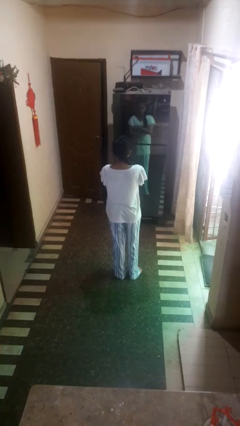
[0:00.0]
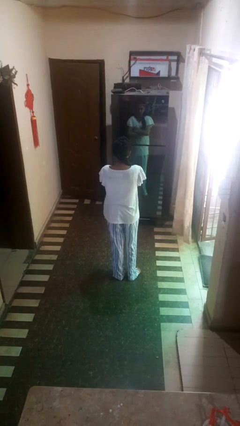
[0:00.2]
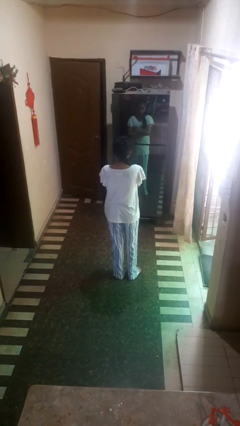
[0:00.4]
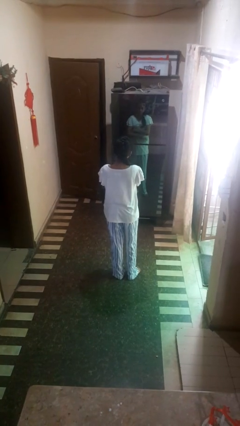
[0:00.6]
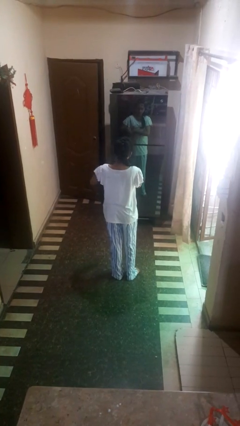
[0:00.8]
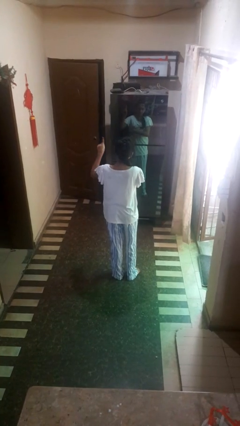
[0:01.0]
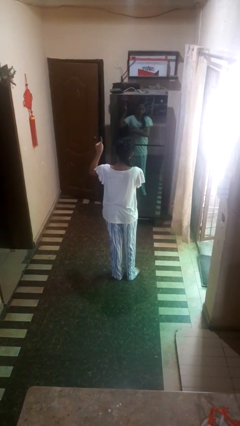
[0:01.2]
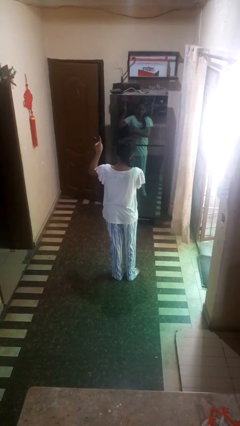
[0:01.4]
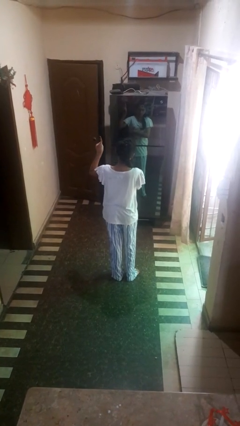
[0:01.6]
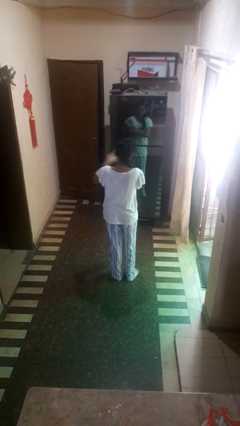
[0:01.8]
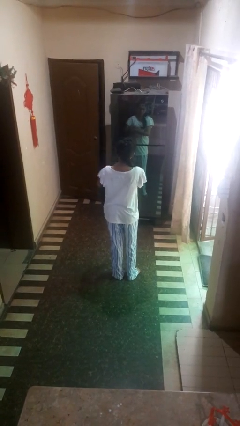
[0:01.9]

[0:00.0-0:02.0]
person gestures number one

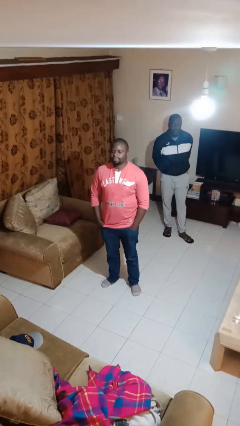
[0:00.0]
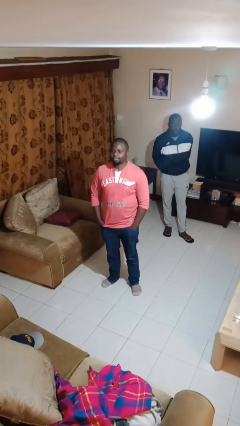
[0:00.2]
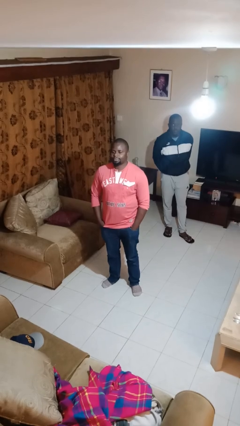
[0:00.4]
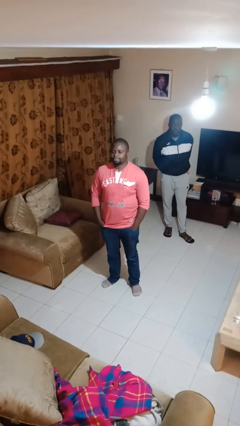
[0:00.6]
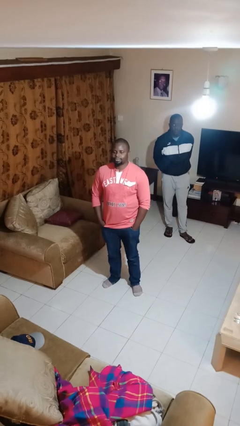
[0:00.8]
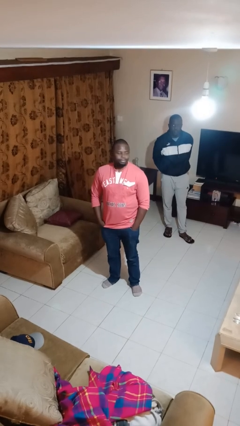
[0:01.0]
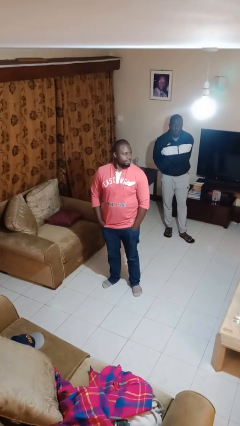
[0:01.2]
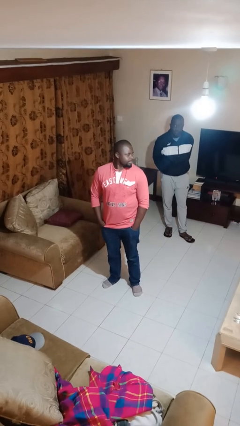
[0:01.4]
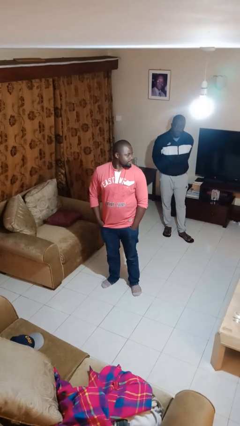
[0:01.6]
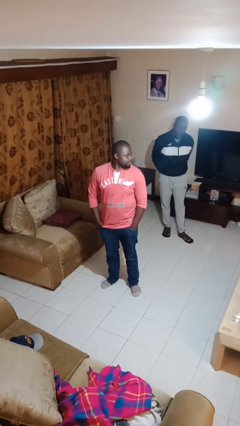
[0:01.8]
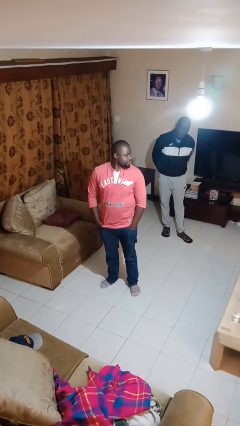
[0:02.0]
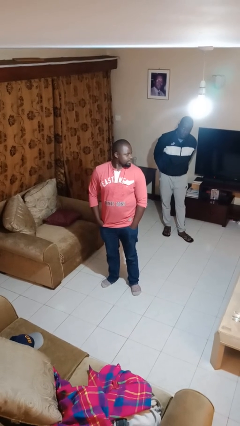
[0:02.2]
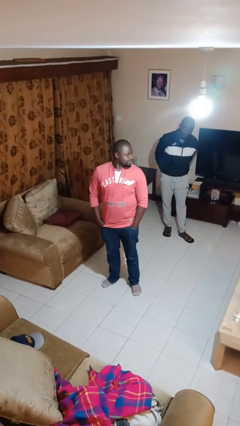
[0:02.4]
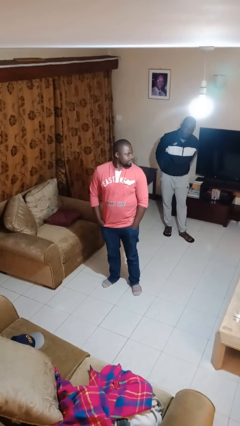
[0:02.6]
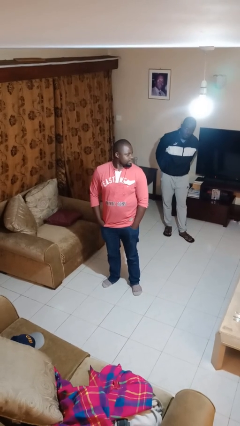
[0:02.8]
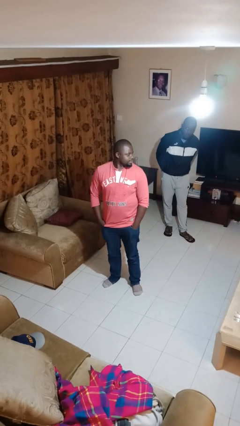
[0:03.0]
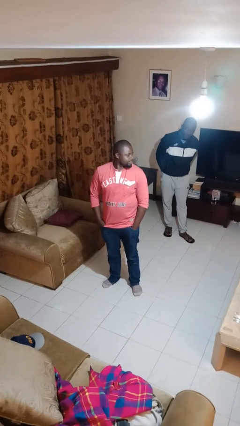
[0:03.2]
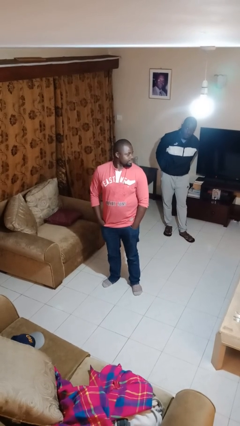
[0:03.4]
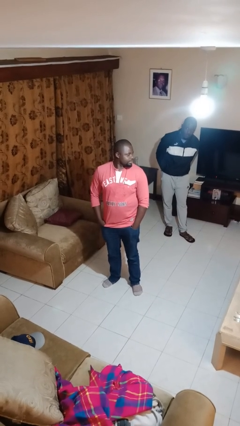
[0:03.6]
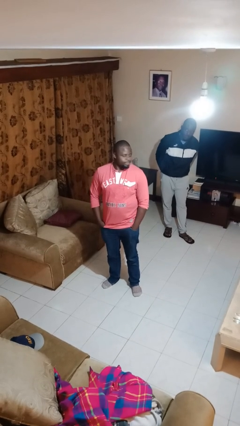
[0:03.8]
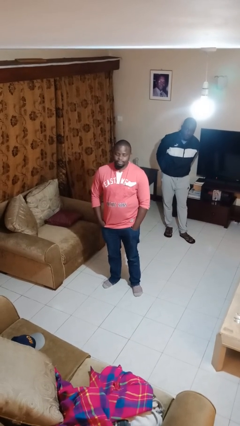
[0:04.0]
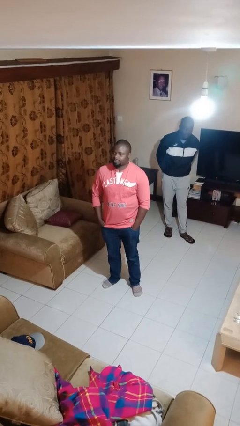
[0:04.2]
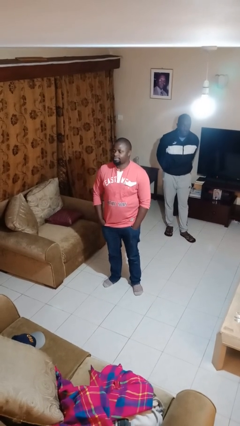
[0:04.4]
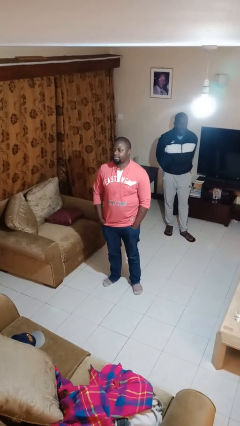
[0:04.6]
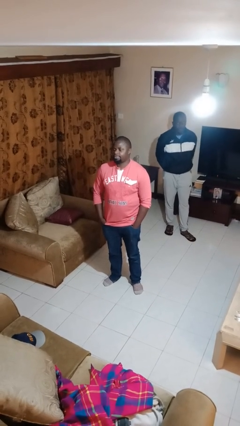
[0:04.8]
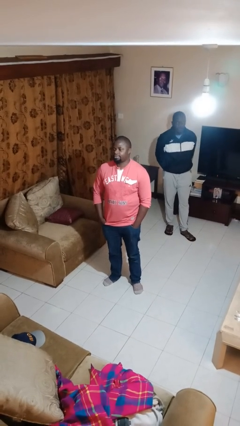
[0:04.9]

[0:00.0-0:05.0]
person looks over shoulder

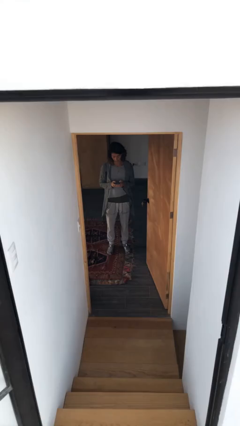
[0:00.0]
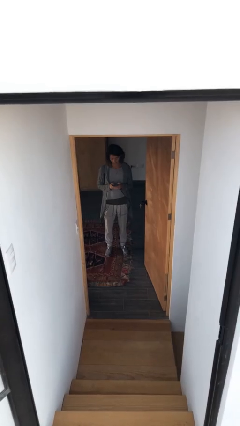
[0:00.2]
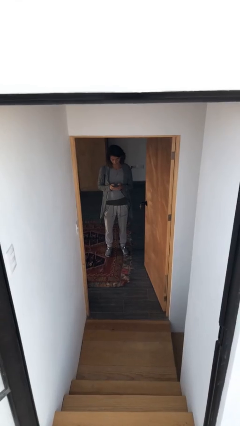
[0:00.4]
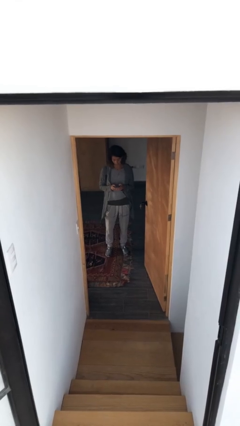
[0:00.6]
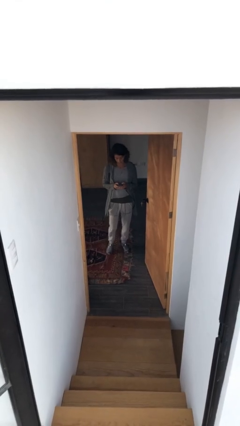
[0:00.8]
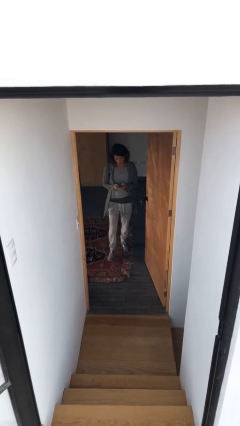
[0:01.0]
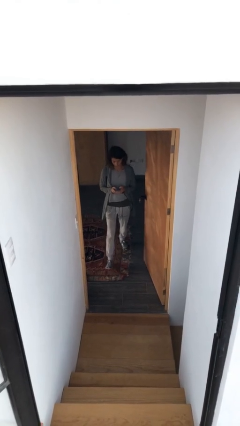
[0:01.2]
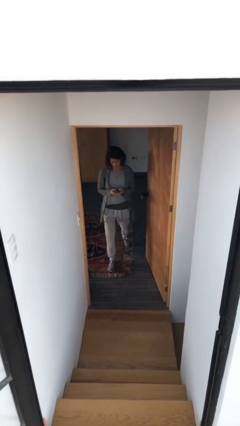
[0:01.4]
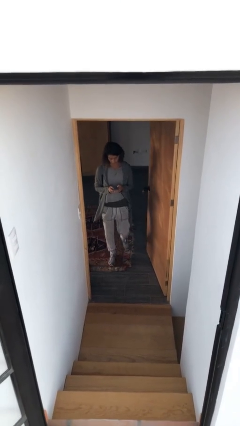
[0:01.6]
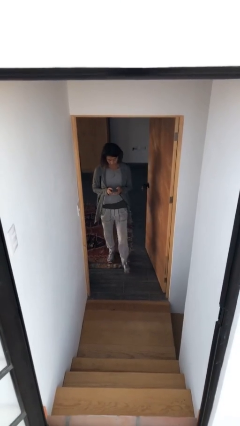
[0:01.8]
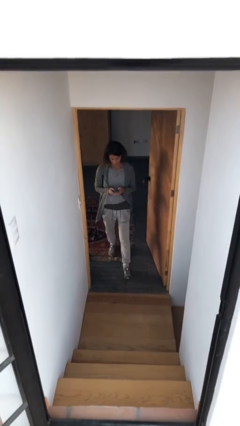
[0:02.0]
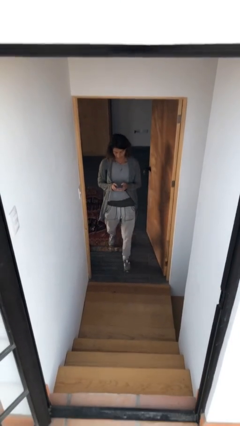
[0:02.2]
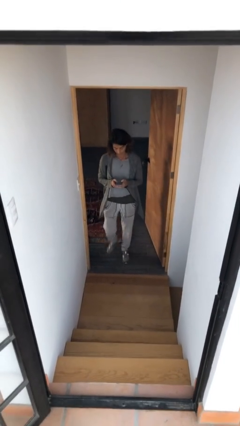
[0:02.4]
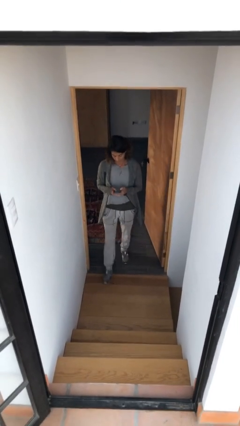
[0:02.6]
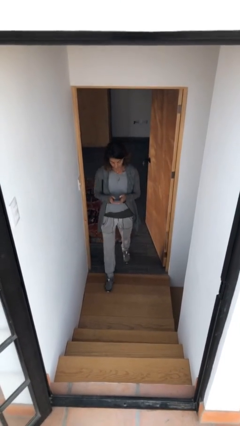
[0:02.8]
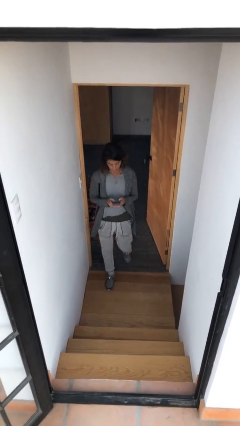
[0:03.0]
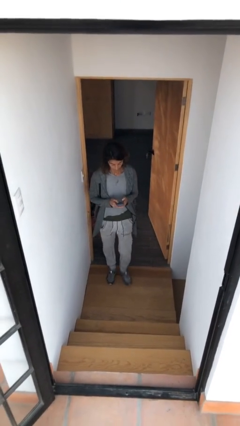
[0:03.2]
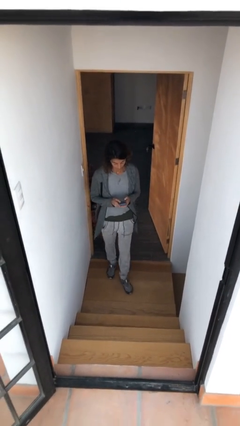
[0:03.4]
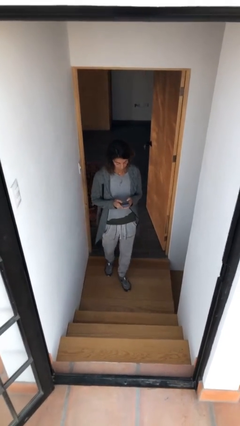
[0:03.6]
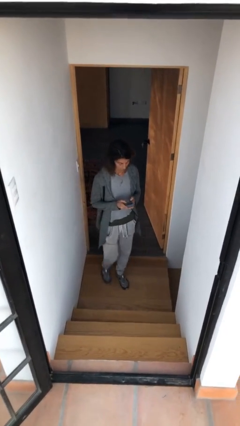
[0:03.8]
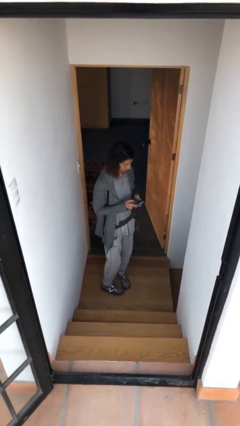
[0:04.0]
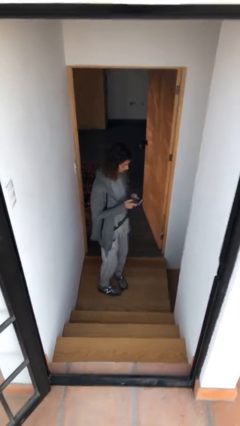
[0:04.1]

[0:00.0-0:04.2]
person enters scene through structure

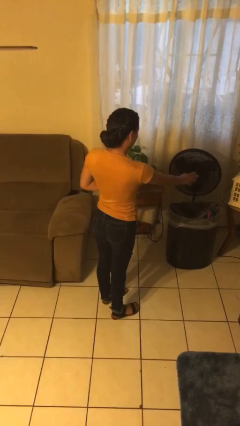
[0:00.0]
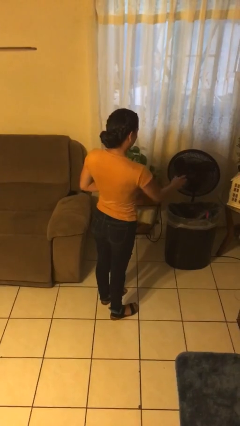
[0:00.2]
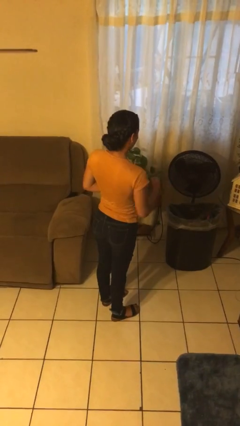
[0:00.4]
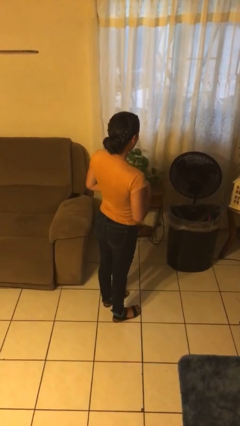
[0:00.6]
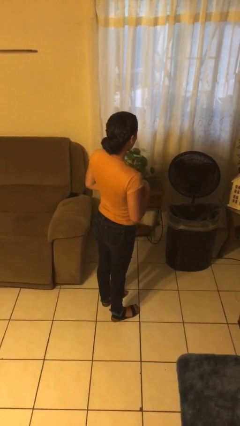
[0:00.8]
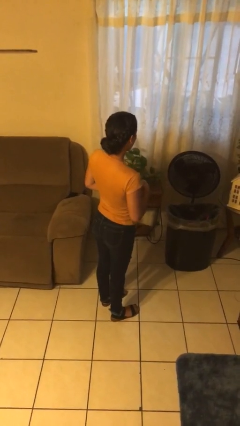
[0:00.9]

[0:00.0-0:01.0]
person discards trash

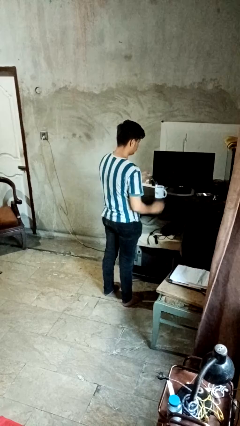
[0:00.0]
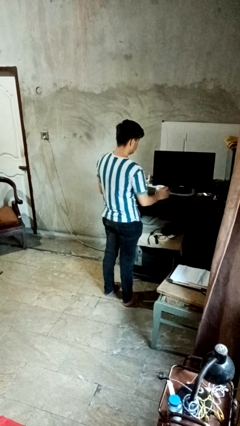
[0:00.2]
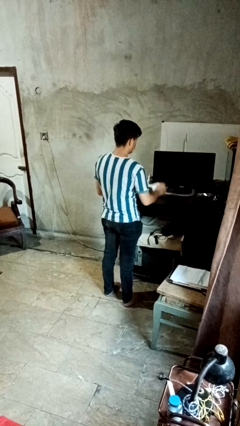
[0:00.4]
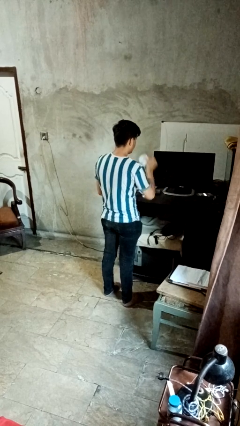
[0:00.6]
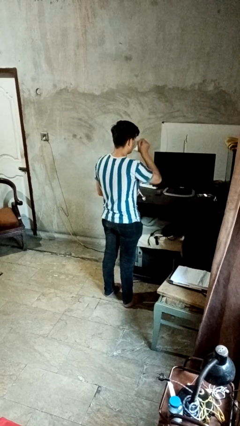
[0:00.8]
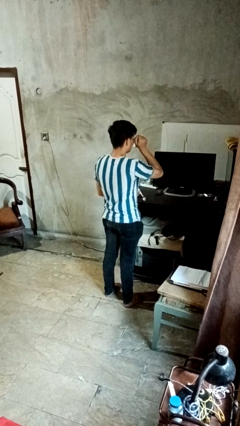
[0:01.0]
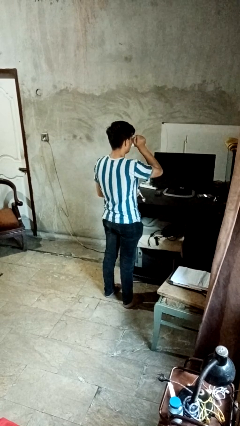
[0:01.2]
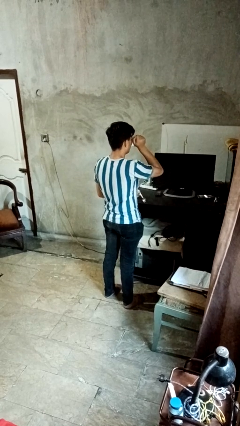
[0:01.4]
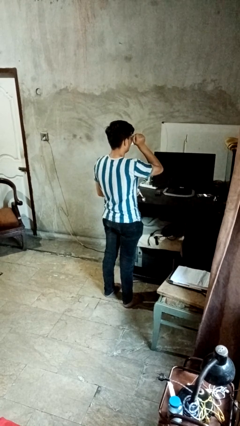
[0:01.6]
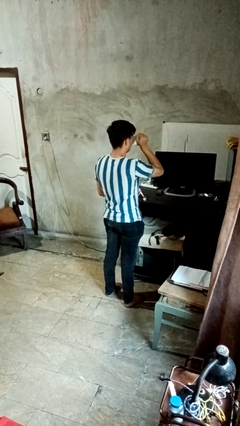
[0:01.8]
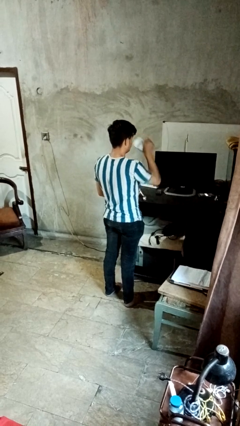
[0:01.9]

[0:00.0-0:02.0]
person drinks from mug

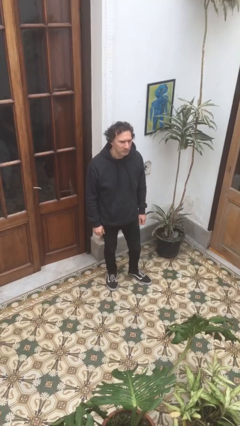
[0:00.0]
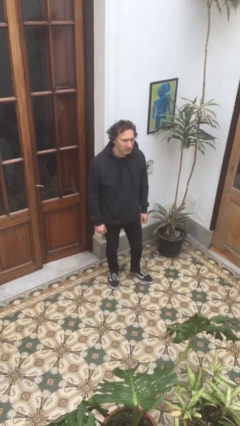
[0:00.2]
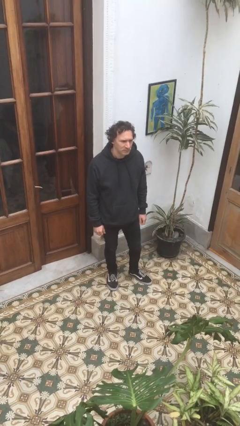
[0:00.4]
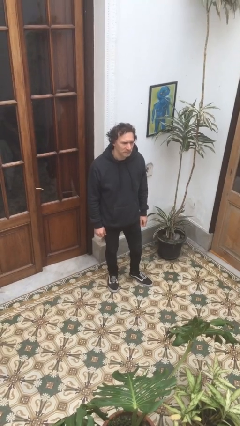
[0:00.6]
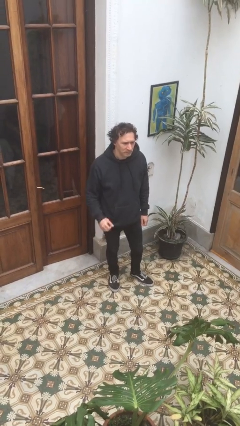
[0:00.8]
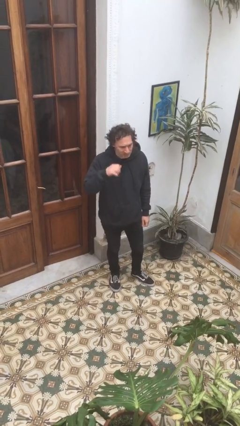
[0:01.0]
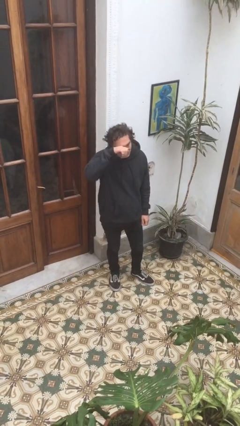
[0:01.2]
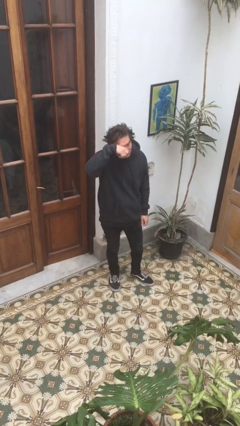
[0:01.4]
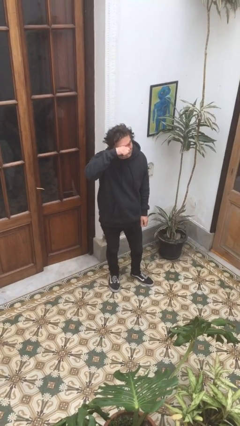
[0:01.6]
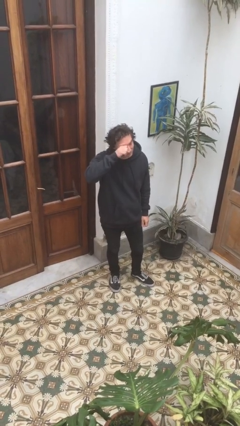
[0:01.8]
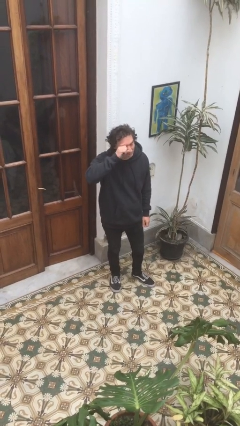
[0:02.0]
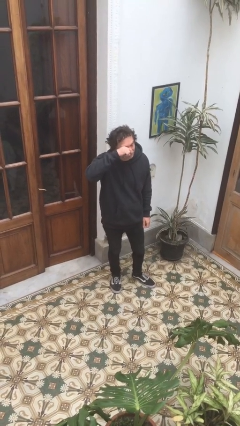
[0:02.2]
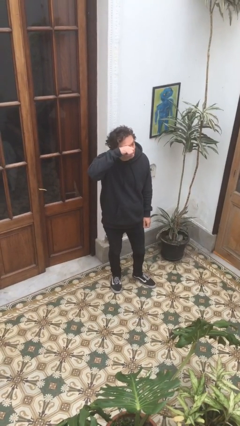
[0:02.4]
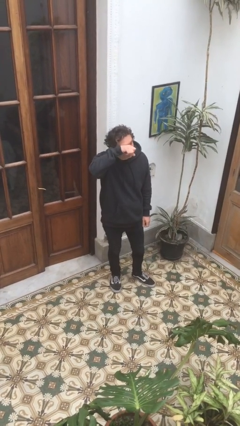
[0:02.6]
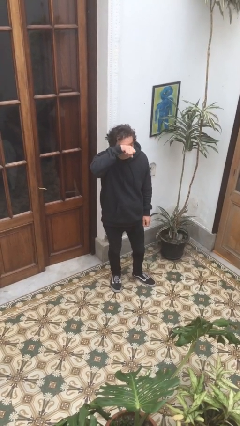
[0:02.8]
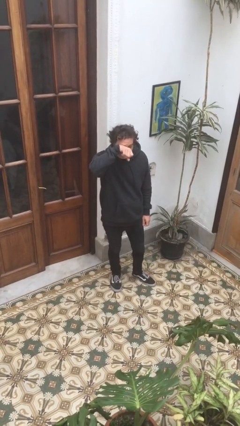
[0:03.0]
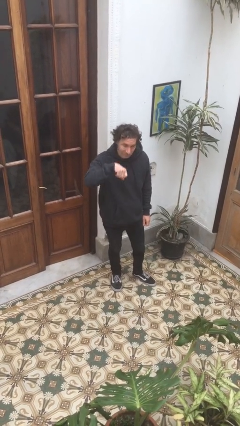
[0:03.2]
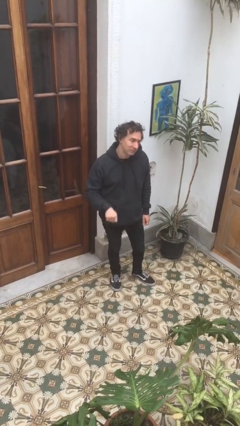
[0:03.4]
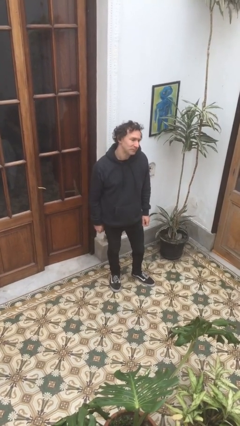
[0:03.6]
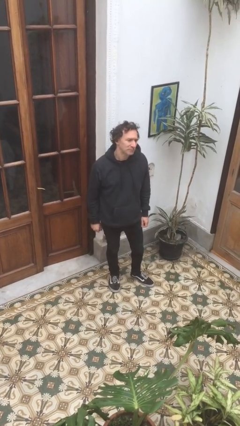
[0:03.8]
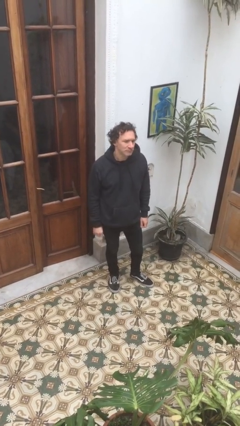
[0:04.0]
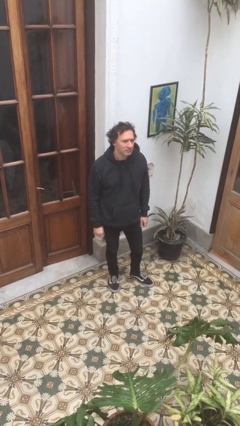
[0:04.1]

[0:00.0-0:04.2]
person rubs eyes
